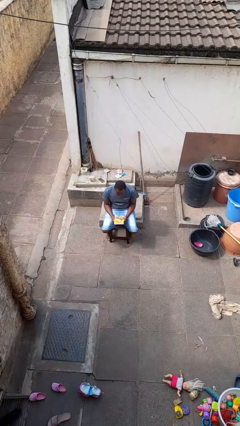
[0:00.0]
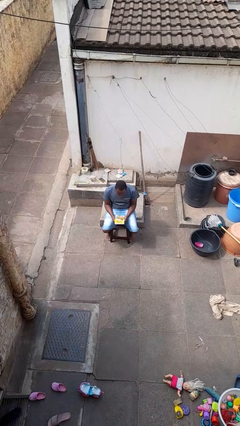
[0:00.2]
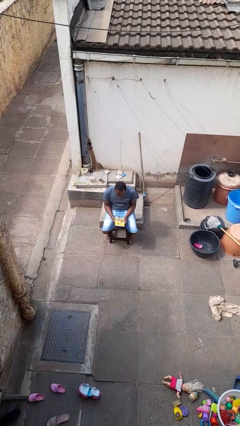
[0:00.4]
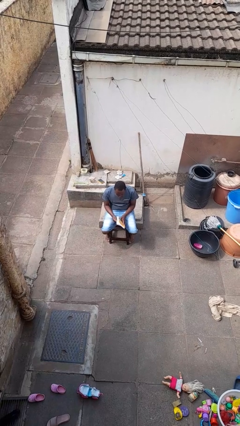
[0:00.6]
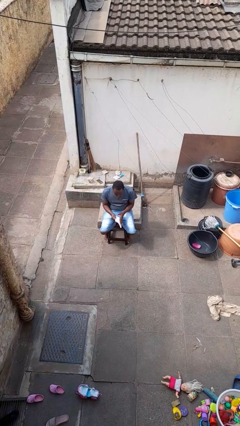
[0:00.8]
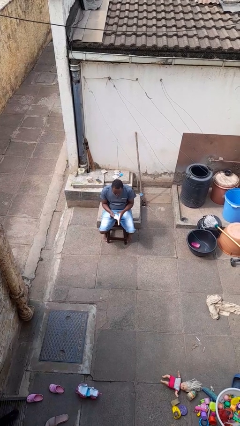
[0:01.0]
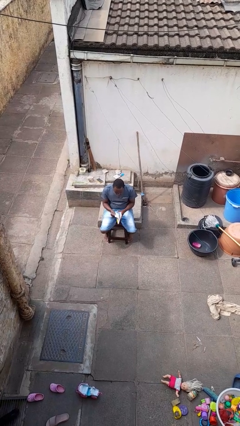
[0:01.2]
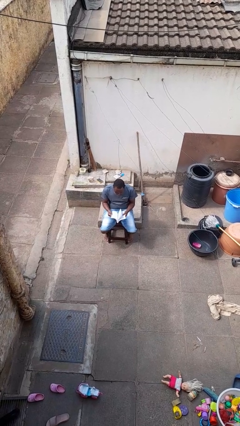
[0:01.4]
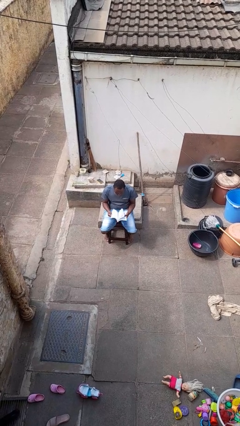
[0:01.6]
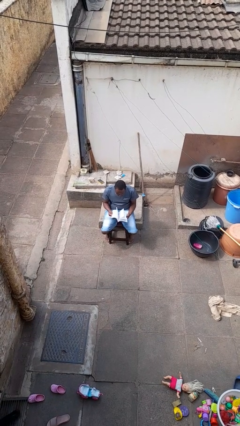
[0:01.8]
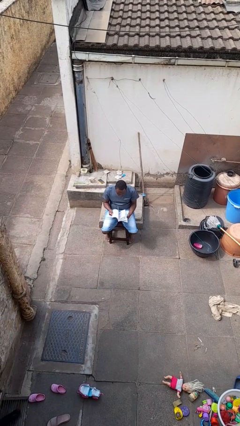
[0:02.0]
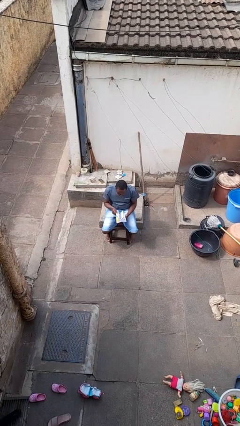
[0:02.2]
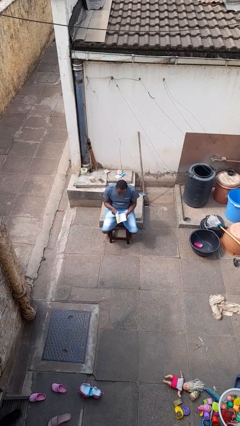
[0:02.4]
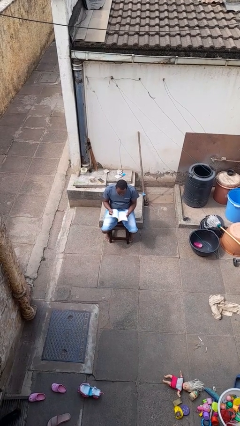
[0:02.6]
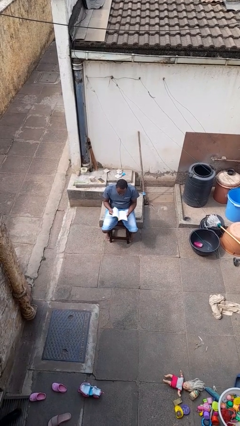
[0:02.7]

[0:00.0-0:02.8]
person reads book

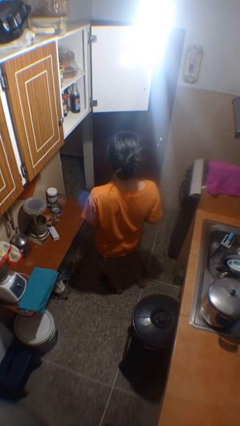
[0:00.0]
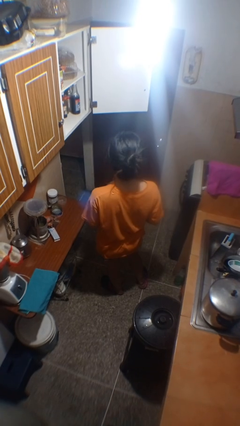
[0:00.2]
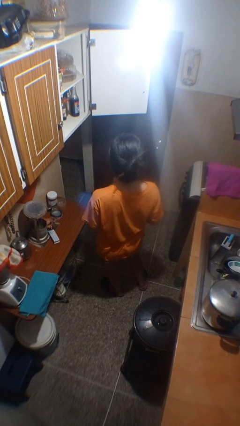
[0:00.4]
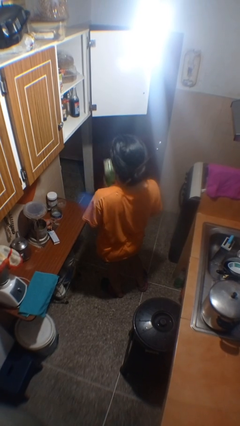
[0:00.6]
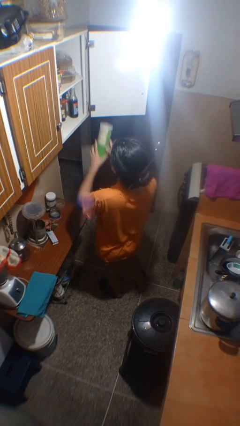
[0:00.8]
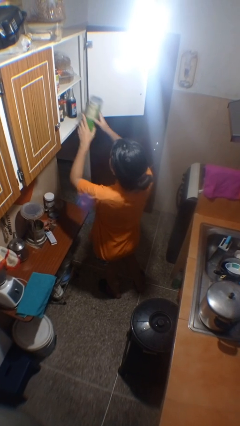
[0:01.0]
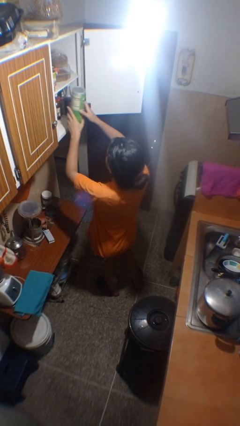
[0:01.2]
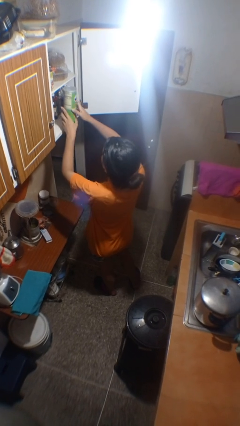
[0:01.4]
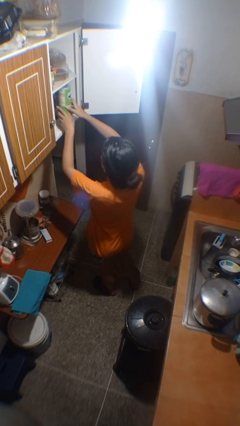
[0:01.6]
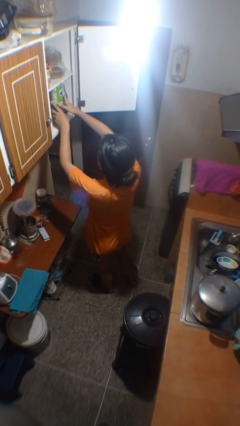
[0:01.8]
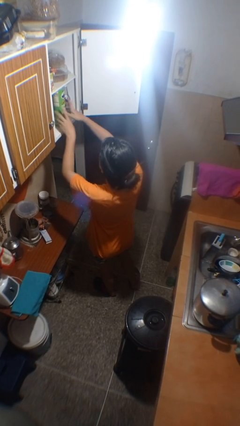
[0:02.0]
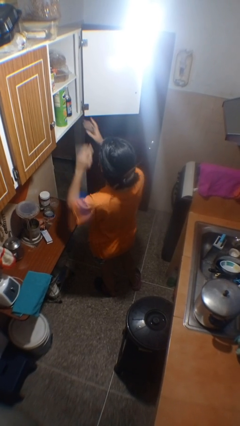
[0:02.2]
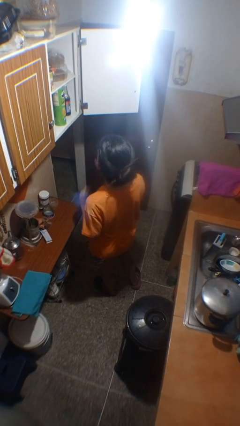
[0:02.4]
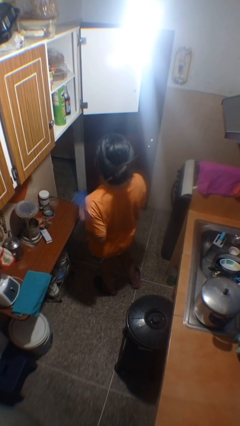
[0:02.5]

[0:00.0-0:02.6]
person puts object in cabinet

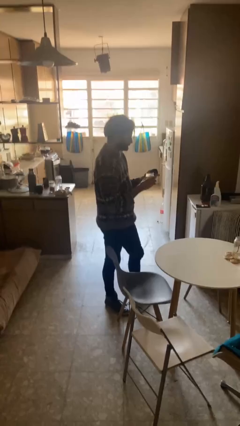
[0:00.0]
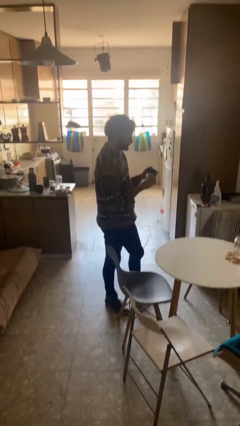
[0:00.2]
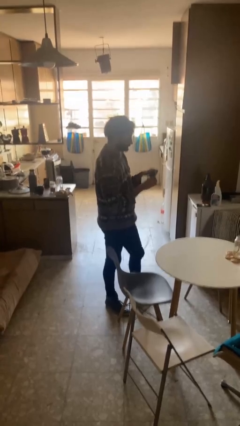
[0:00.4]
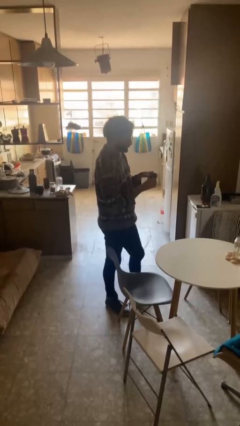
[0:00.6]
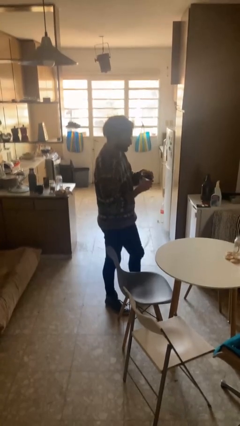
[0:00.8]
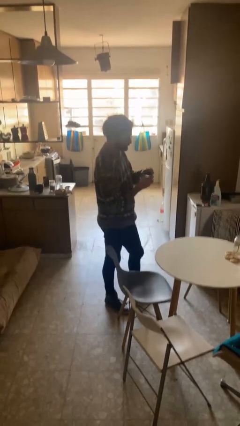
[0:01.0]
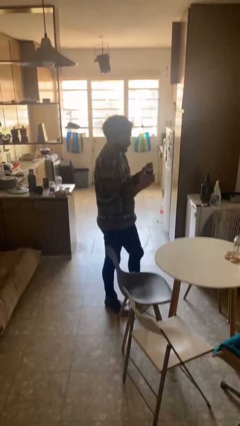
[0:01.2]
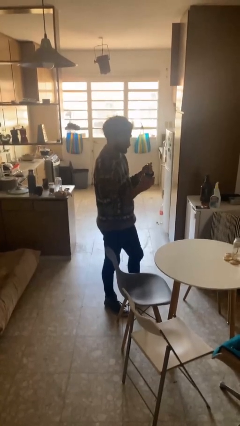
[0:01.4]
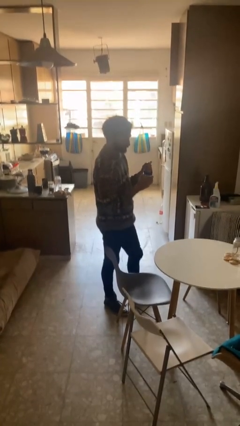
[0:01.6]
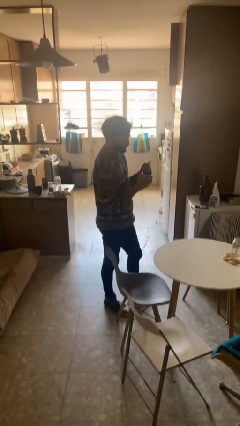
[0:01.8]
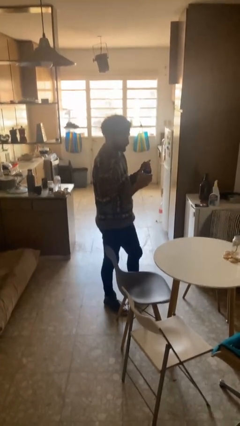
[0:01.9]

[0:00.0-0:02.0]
person closes jar

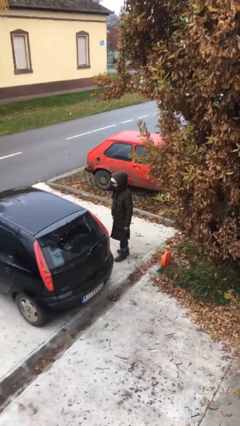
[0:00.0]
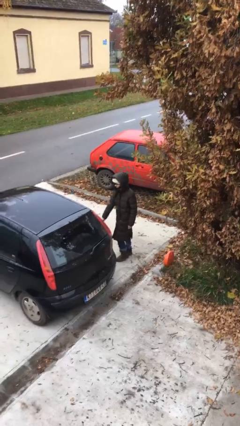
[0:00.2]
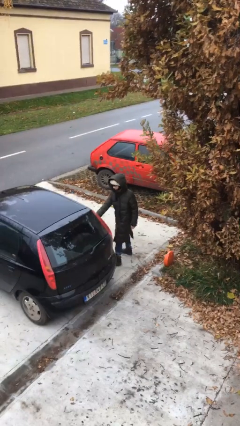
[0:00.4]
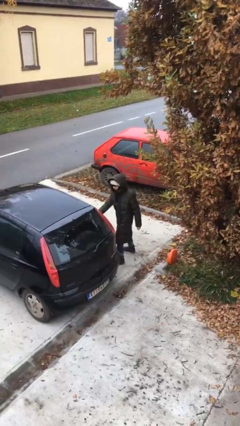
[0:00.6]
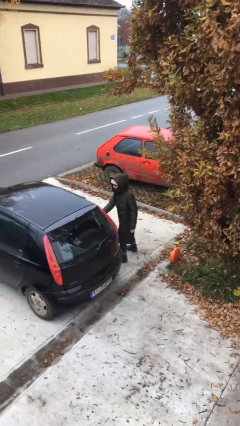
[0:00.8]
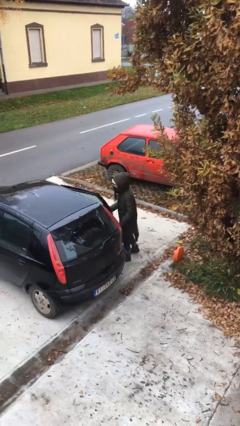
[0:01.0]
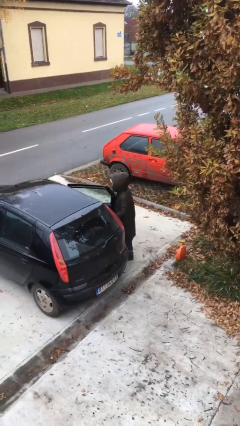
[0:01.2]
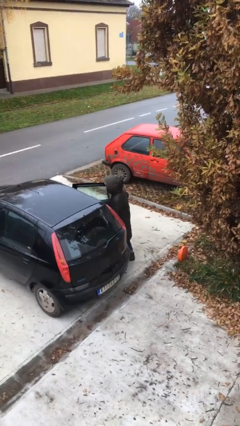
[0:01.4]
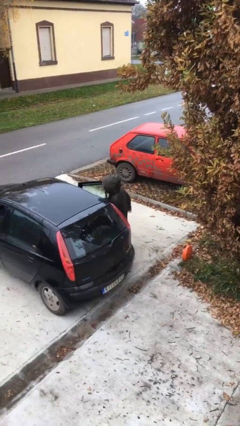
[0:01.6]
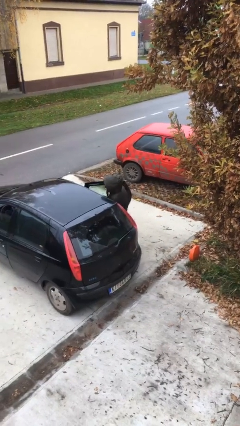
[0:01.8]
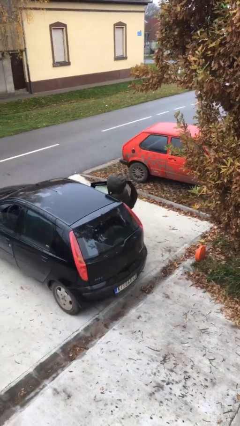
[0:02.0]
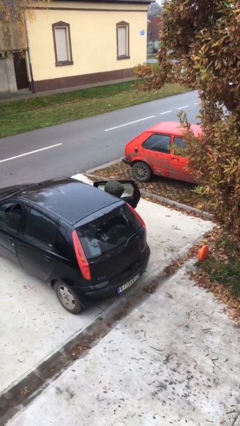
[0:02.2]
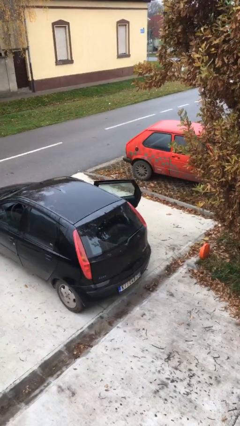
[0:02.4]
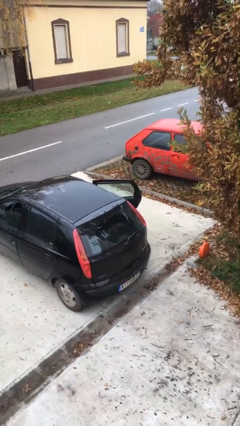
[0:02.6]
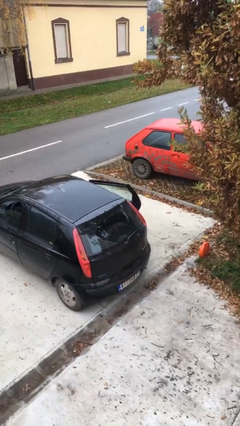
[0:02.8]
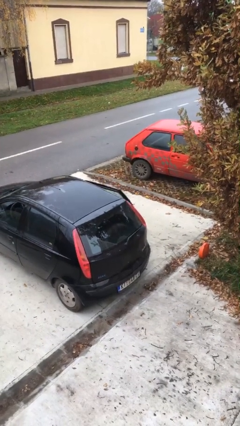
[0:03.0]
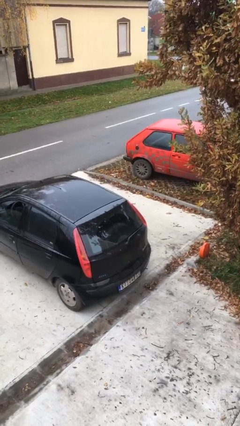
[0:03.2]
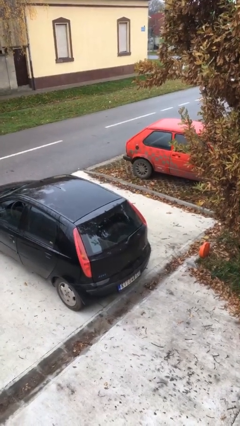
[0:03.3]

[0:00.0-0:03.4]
person enters car

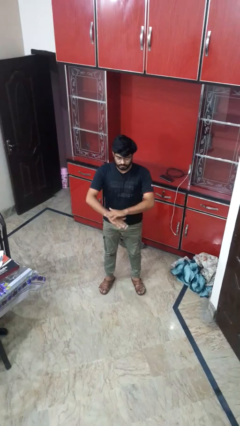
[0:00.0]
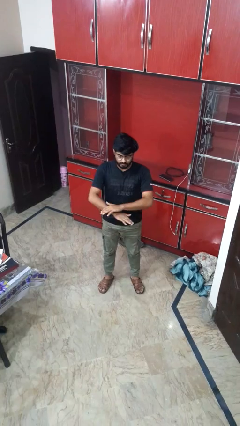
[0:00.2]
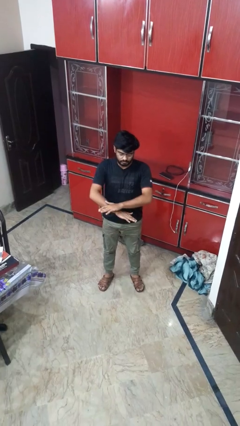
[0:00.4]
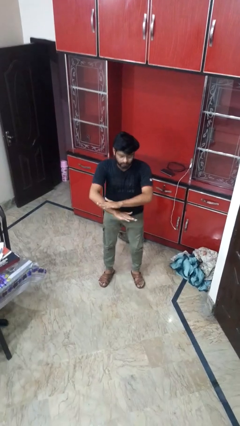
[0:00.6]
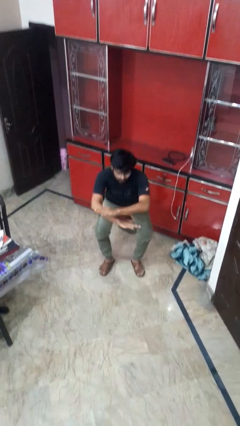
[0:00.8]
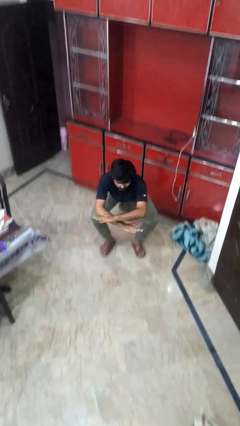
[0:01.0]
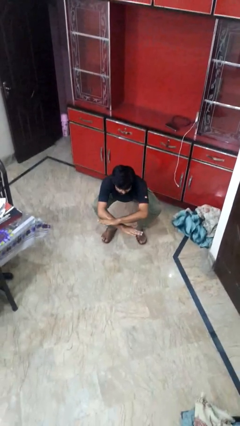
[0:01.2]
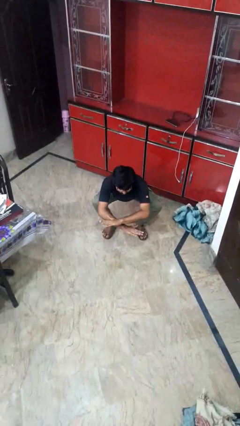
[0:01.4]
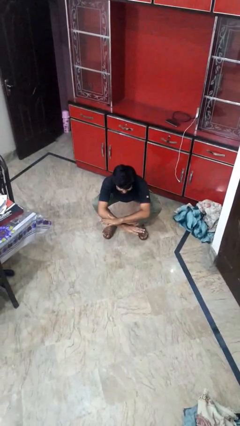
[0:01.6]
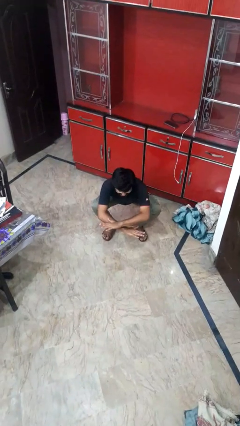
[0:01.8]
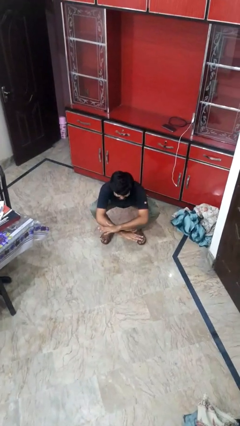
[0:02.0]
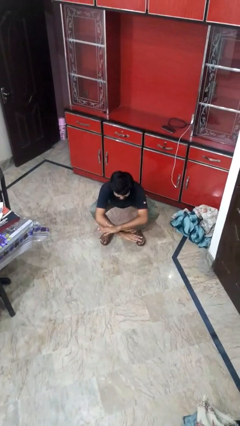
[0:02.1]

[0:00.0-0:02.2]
person squats

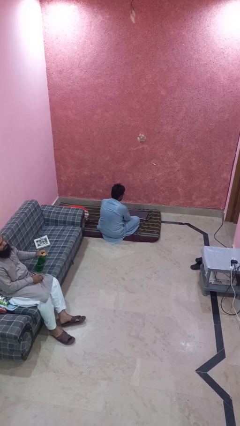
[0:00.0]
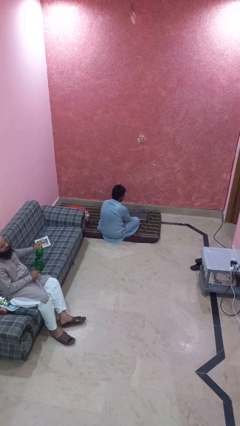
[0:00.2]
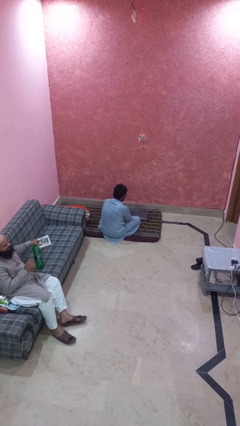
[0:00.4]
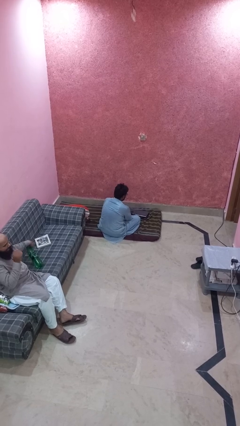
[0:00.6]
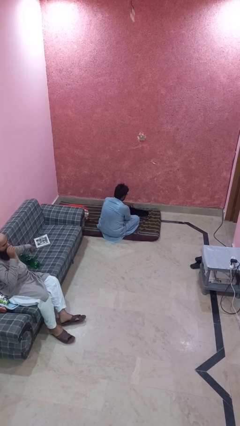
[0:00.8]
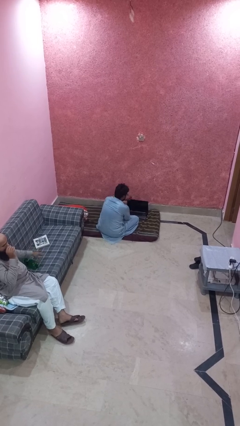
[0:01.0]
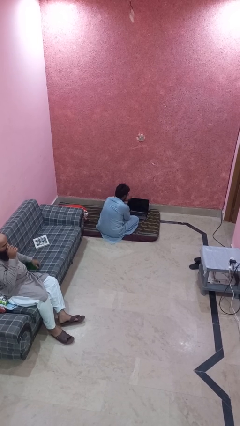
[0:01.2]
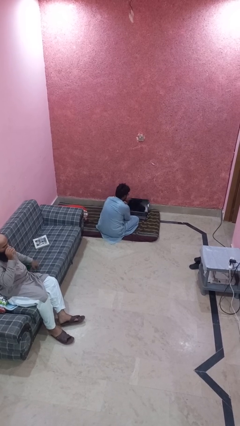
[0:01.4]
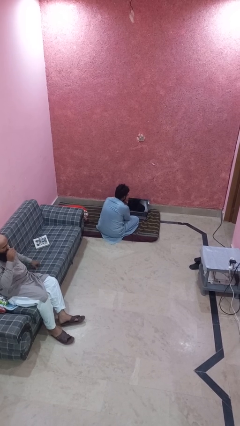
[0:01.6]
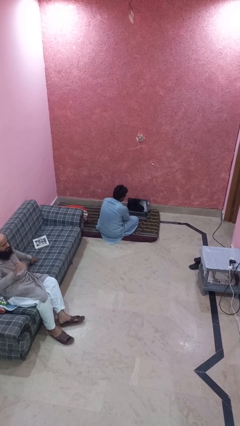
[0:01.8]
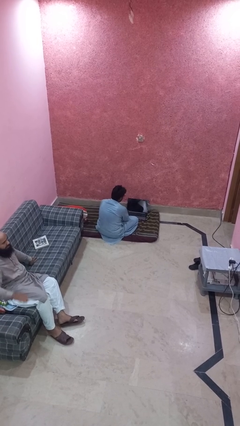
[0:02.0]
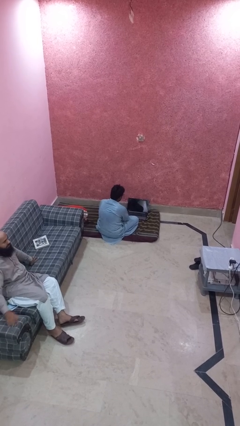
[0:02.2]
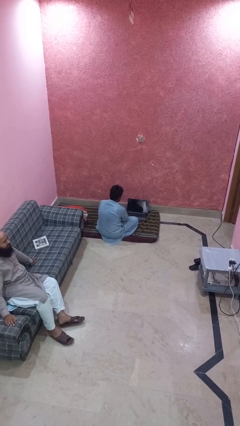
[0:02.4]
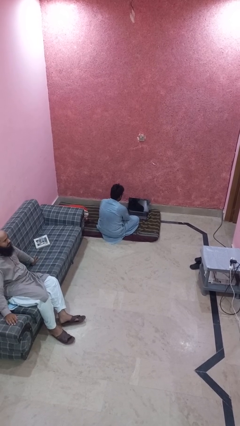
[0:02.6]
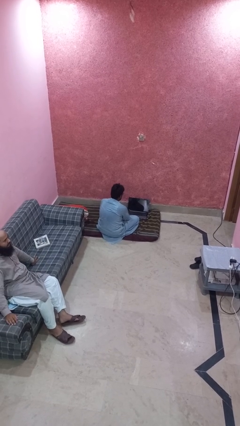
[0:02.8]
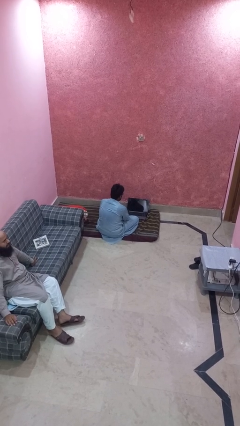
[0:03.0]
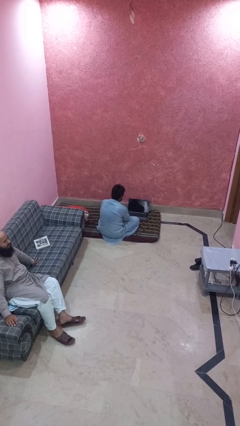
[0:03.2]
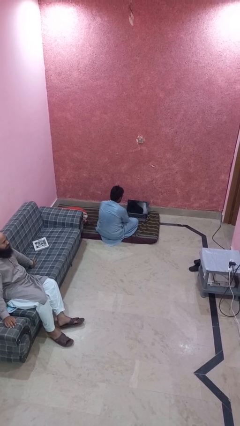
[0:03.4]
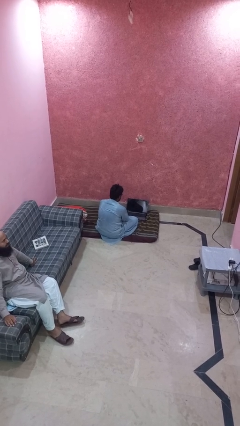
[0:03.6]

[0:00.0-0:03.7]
person opens laptop

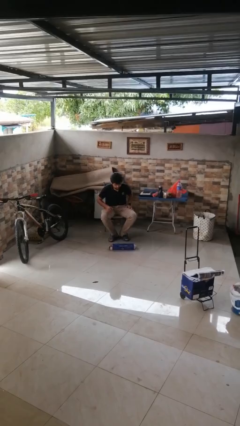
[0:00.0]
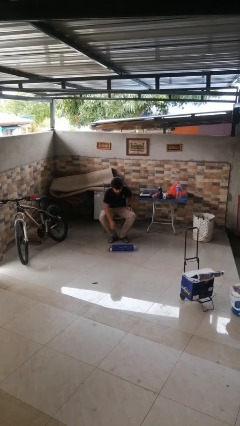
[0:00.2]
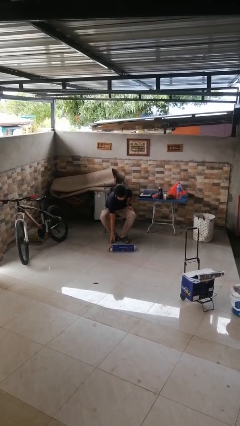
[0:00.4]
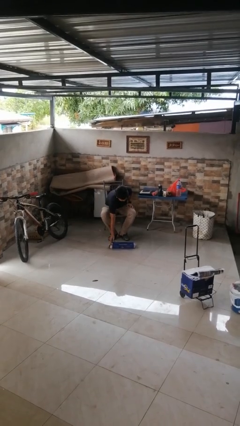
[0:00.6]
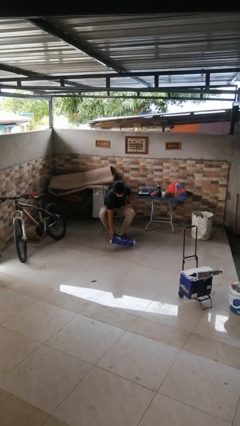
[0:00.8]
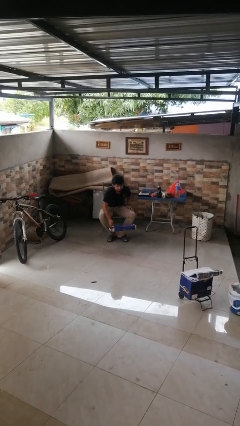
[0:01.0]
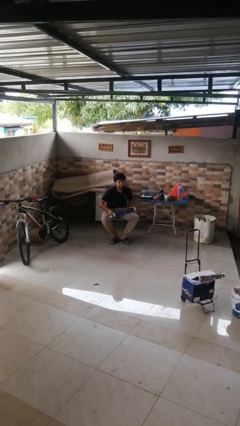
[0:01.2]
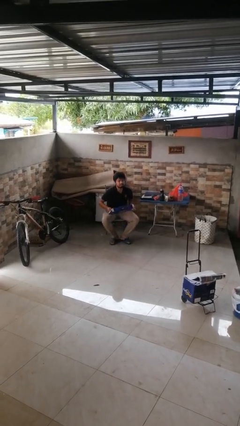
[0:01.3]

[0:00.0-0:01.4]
person stands up from floor
